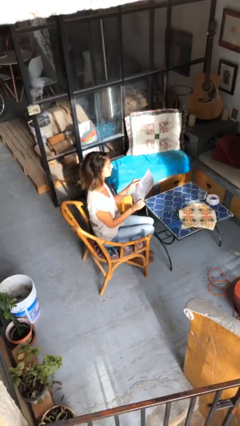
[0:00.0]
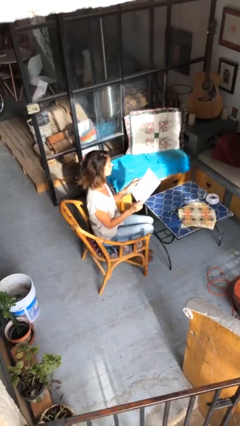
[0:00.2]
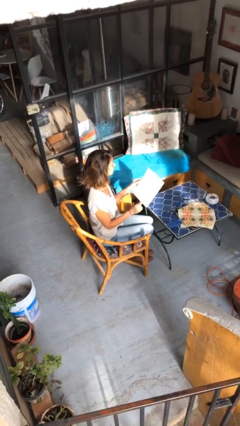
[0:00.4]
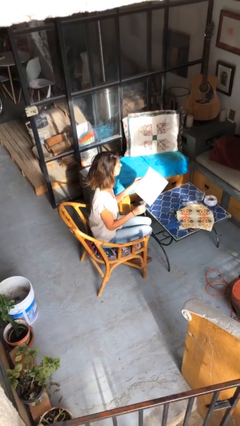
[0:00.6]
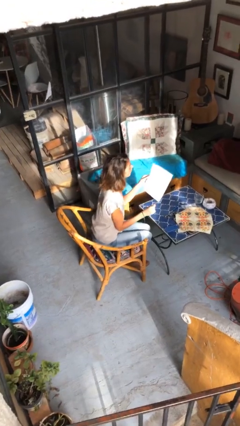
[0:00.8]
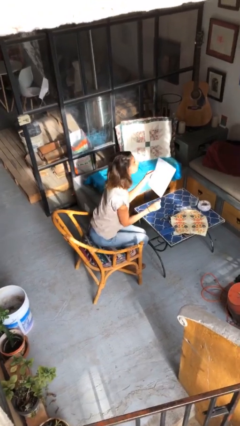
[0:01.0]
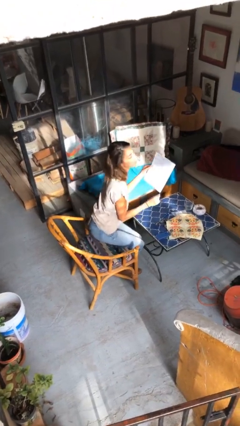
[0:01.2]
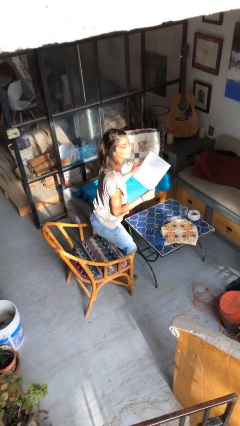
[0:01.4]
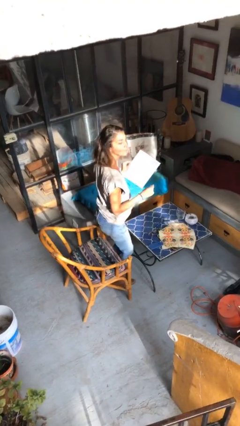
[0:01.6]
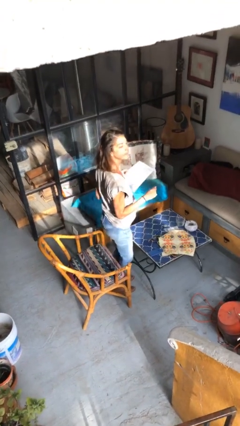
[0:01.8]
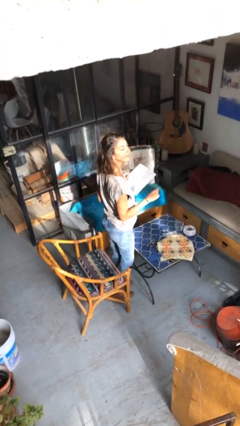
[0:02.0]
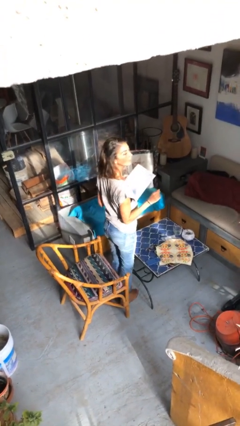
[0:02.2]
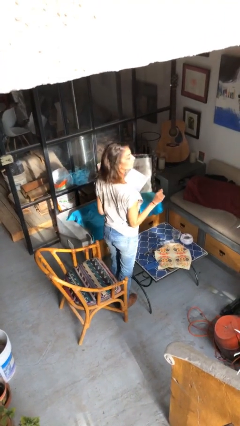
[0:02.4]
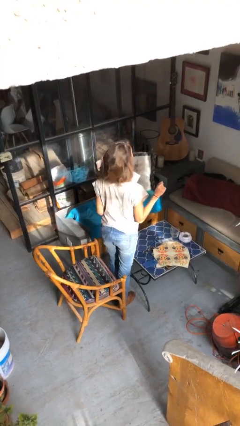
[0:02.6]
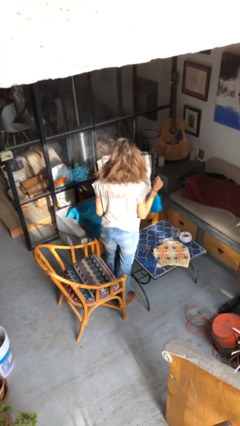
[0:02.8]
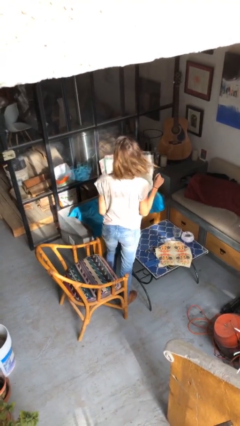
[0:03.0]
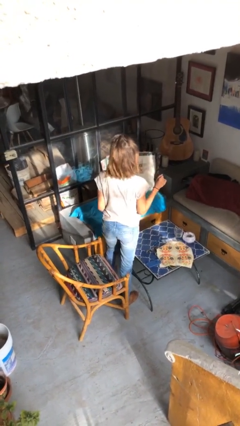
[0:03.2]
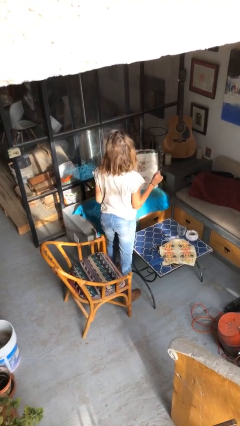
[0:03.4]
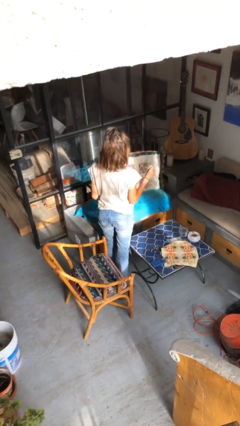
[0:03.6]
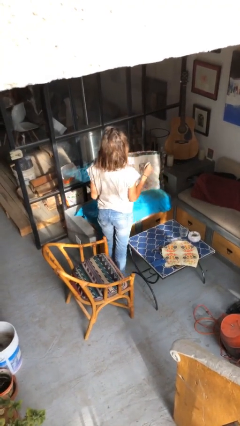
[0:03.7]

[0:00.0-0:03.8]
person stands up

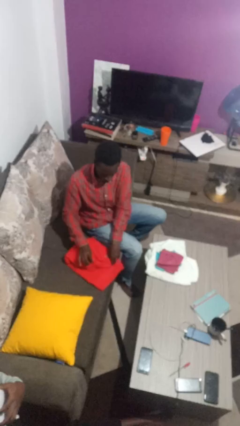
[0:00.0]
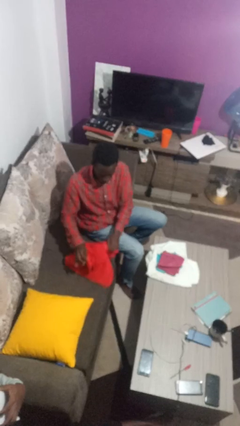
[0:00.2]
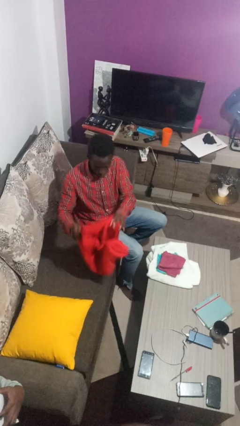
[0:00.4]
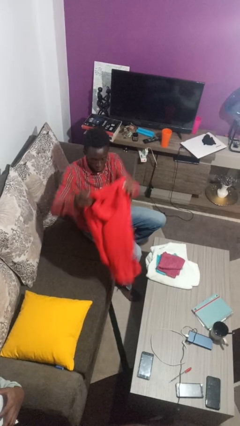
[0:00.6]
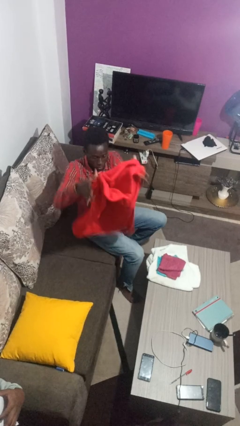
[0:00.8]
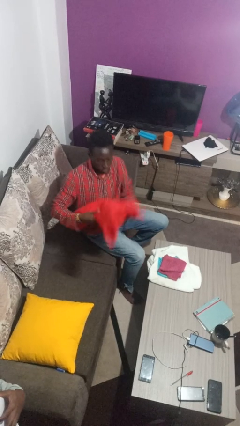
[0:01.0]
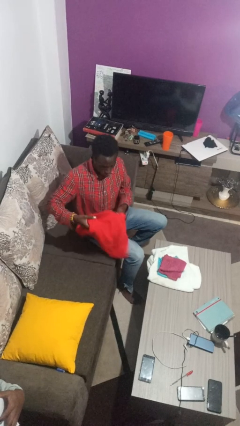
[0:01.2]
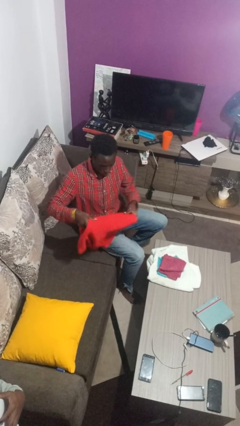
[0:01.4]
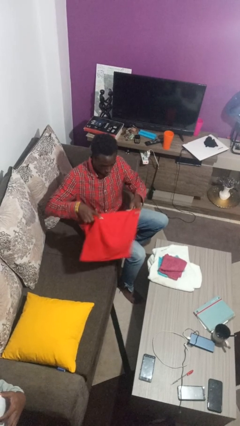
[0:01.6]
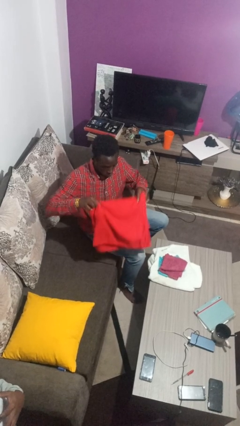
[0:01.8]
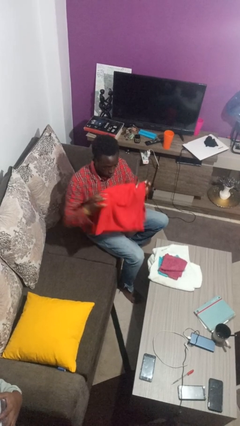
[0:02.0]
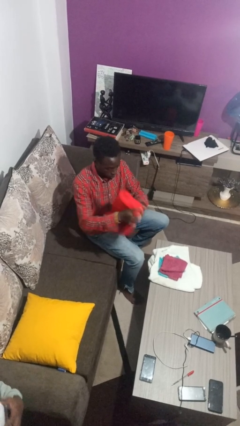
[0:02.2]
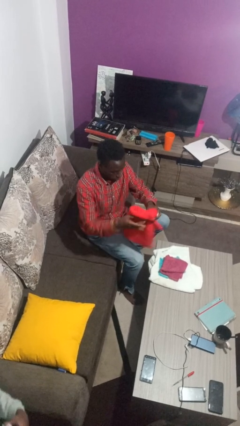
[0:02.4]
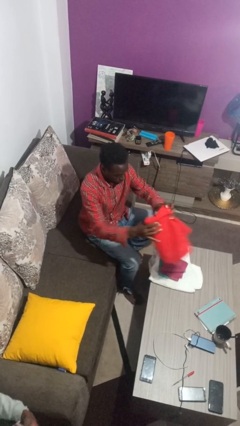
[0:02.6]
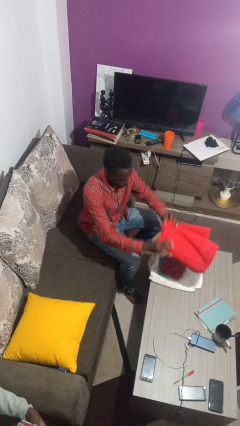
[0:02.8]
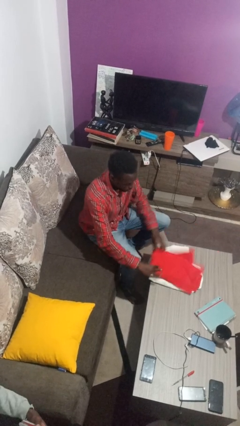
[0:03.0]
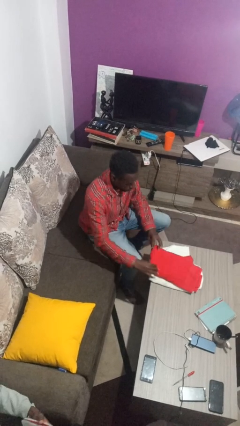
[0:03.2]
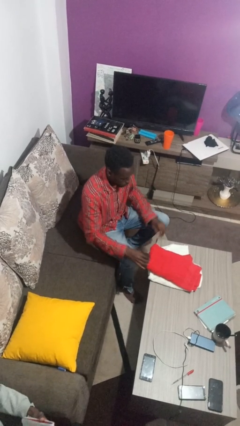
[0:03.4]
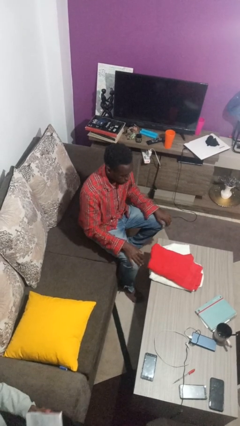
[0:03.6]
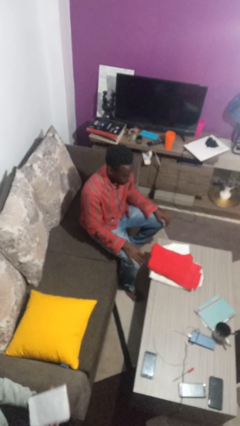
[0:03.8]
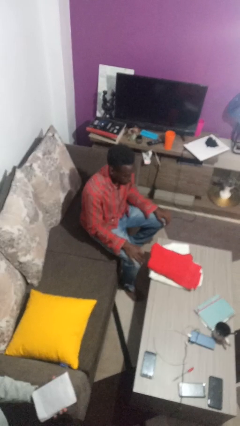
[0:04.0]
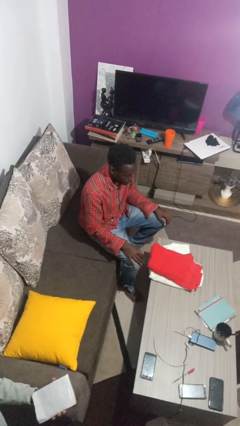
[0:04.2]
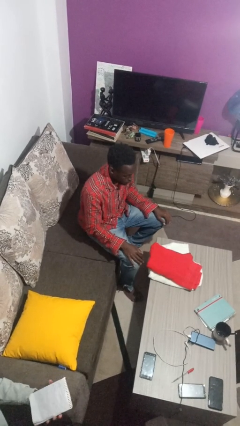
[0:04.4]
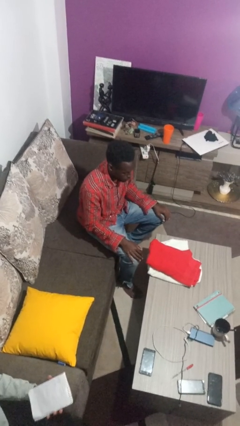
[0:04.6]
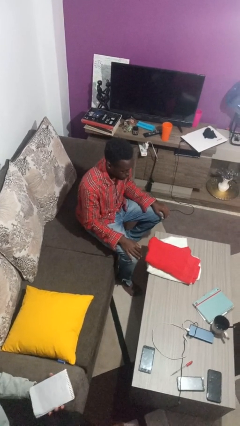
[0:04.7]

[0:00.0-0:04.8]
person folds towel

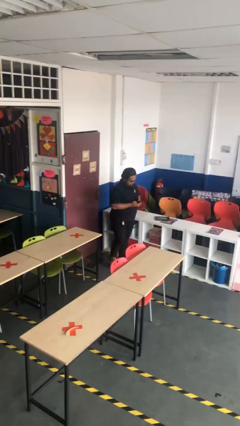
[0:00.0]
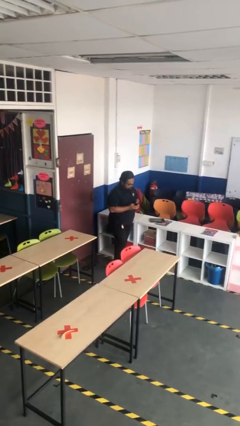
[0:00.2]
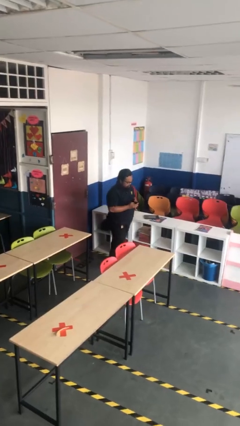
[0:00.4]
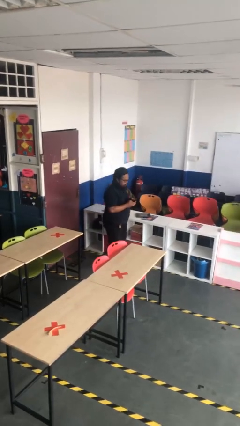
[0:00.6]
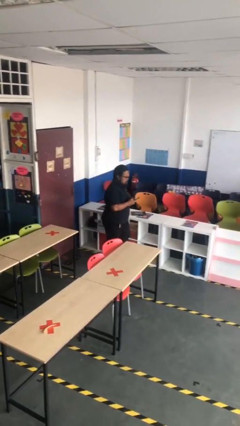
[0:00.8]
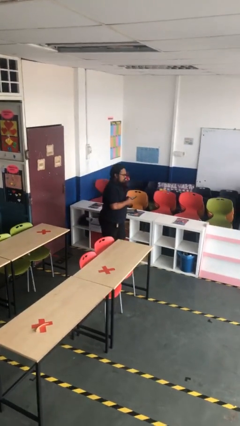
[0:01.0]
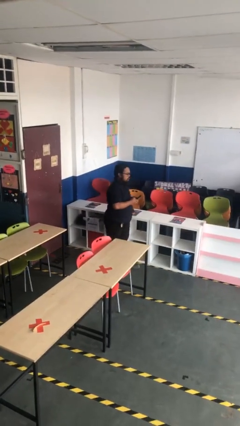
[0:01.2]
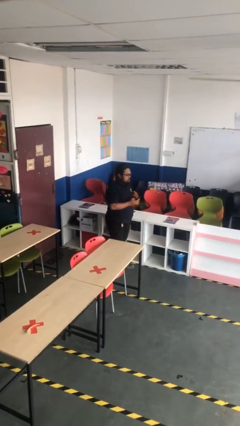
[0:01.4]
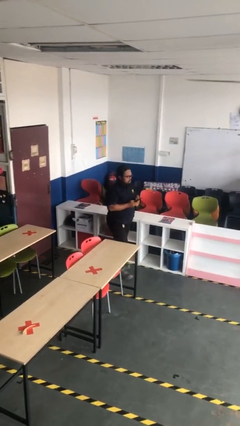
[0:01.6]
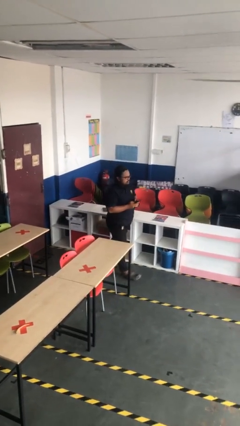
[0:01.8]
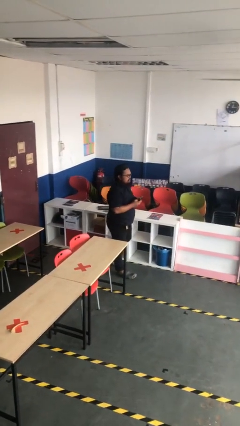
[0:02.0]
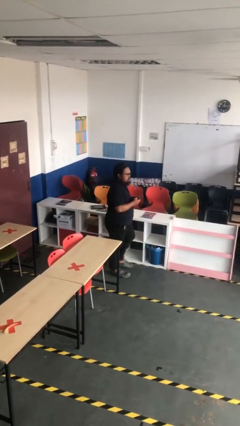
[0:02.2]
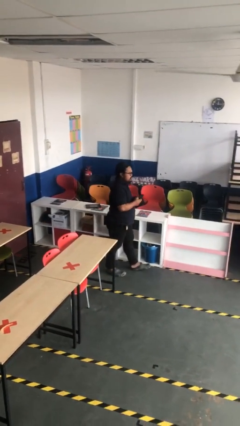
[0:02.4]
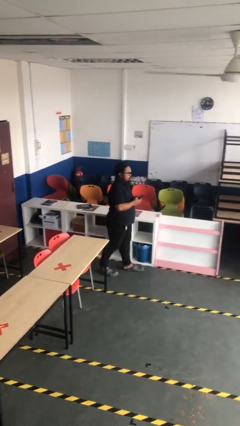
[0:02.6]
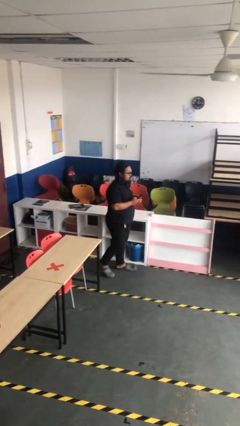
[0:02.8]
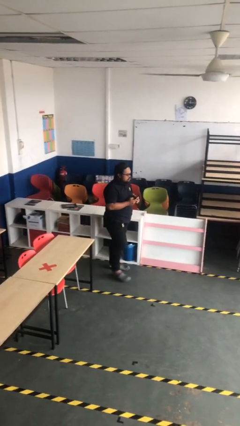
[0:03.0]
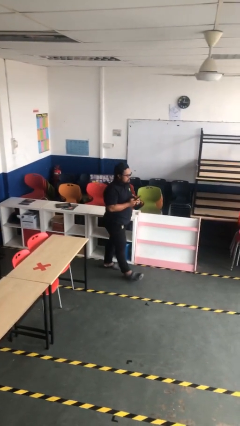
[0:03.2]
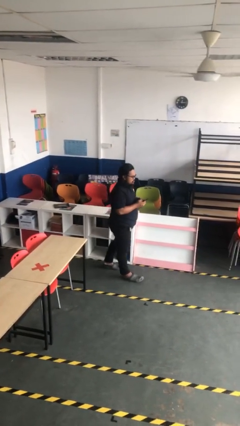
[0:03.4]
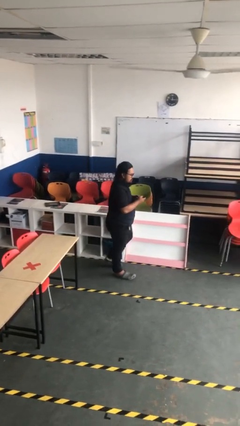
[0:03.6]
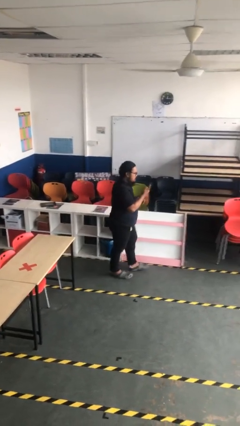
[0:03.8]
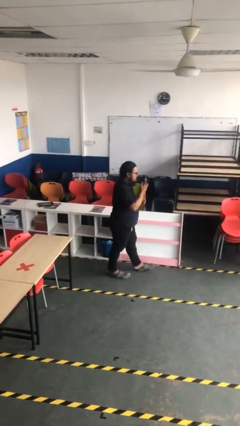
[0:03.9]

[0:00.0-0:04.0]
person texts on phone

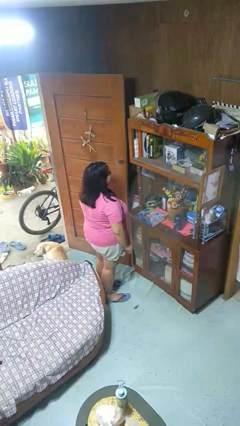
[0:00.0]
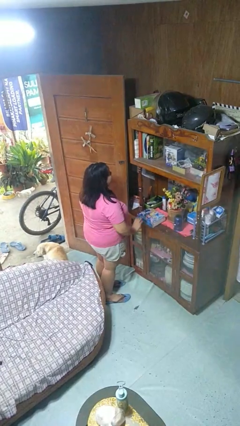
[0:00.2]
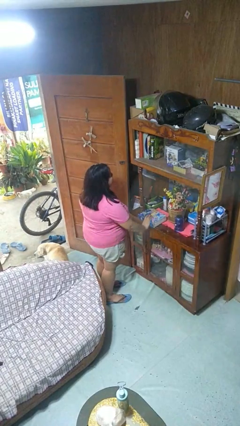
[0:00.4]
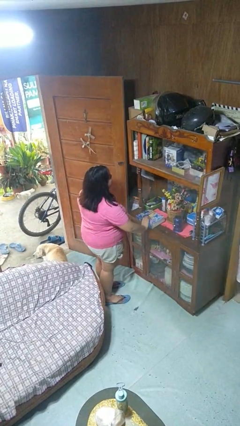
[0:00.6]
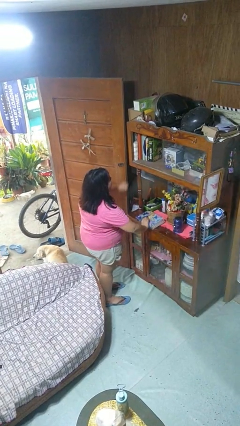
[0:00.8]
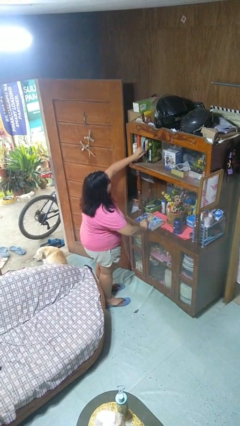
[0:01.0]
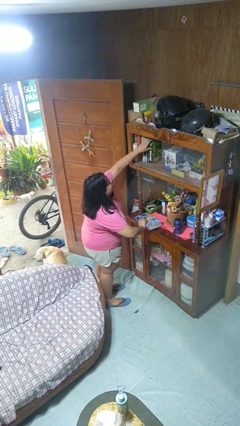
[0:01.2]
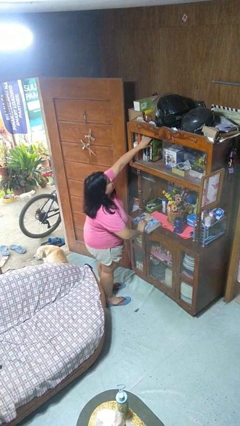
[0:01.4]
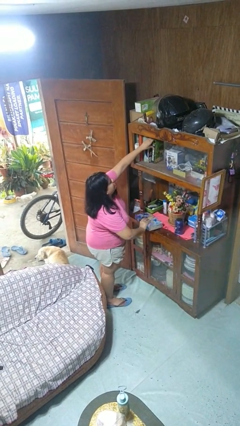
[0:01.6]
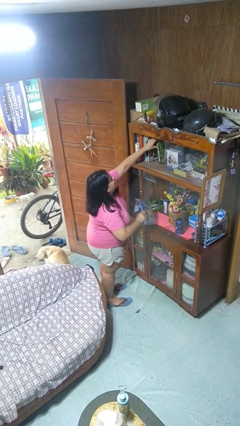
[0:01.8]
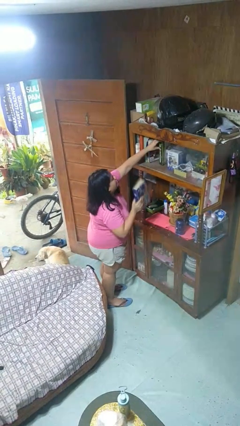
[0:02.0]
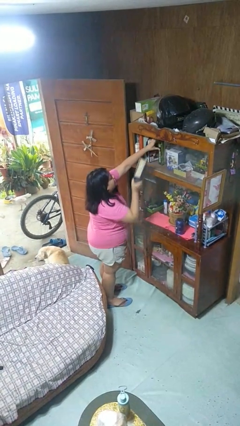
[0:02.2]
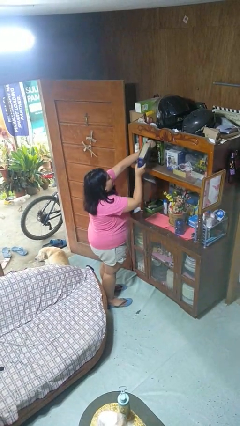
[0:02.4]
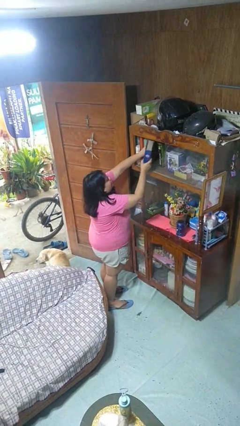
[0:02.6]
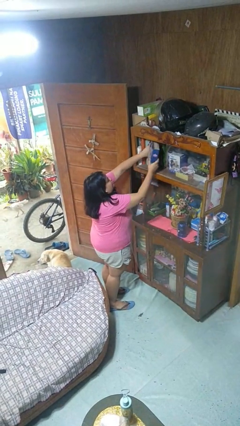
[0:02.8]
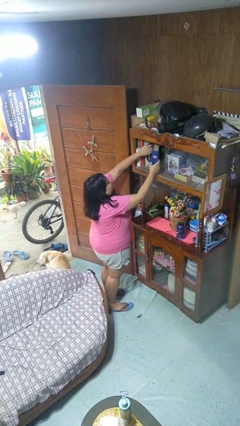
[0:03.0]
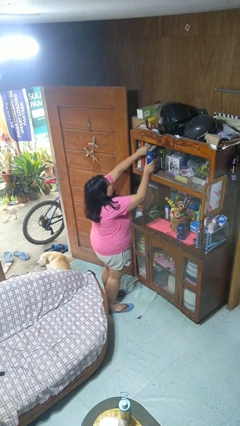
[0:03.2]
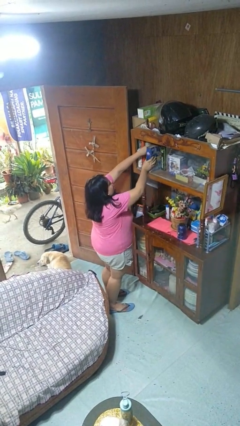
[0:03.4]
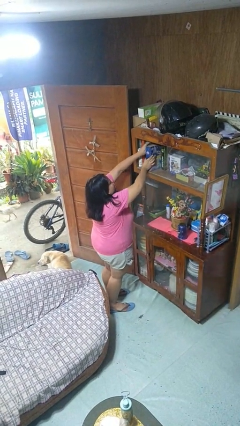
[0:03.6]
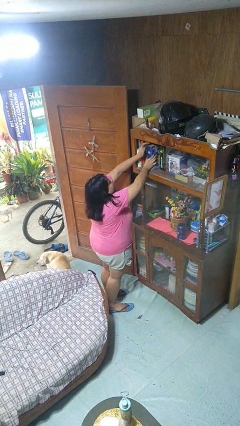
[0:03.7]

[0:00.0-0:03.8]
person puts down object on shelf

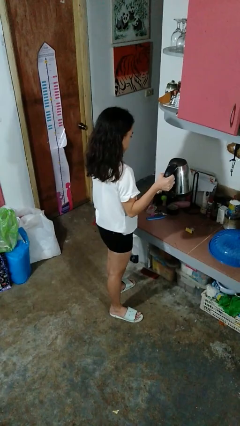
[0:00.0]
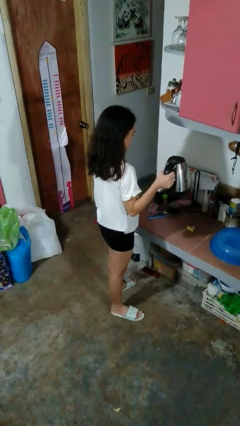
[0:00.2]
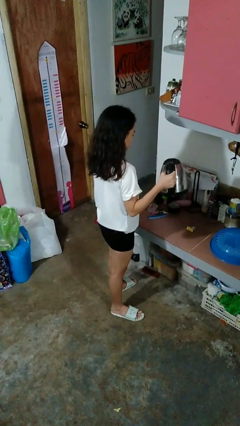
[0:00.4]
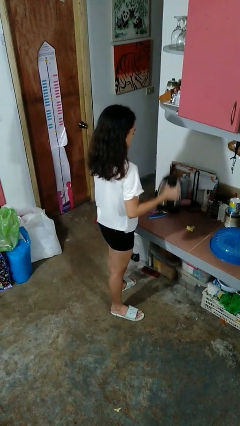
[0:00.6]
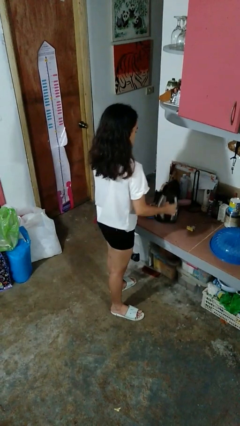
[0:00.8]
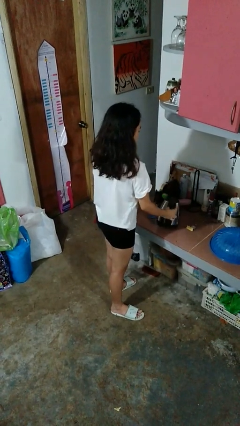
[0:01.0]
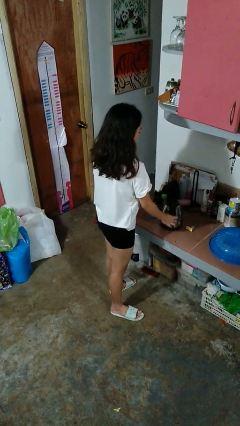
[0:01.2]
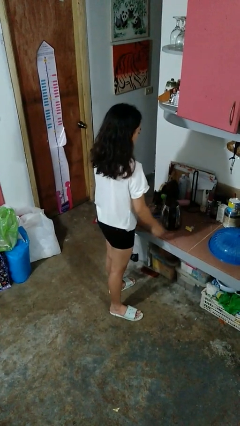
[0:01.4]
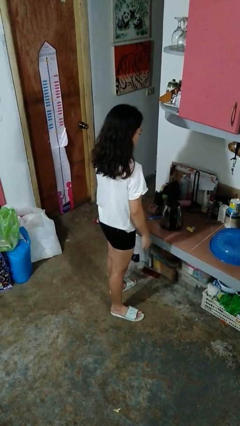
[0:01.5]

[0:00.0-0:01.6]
person puts down object on countertop
